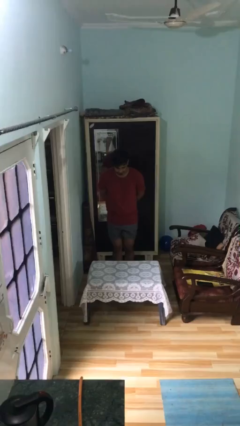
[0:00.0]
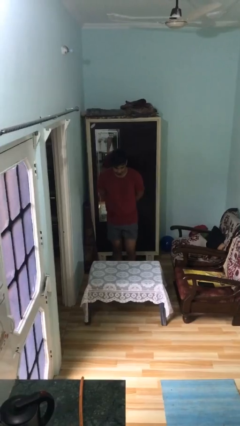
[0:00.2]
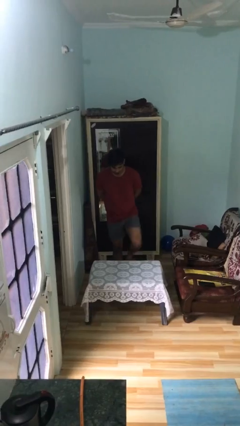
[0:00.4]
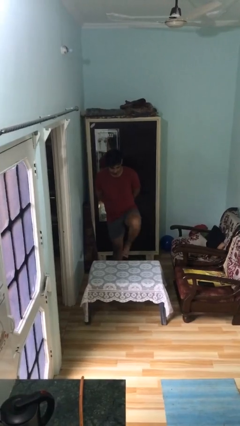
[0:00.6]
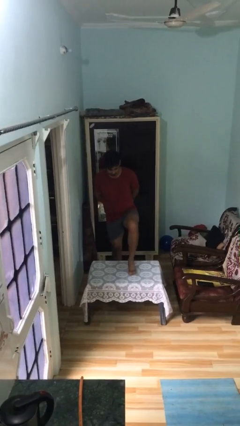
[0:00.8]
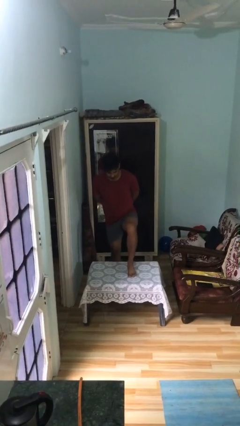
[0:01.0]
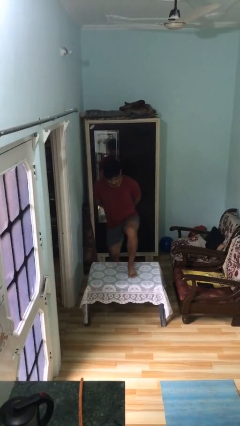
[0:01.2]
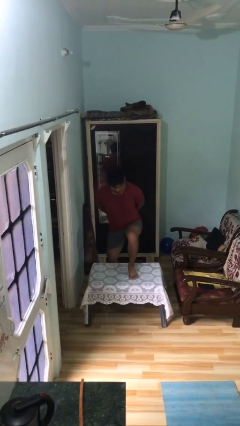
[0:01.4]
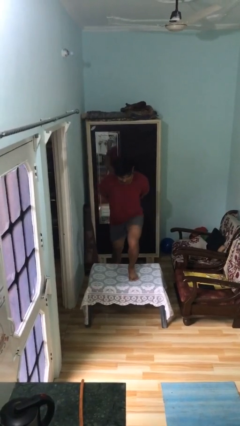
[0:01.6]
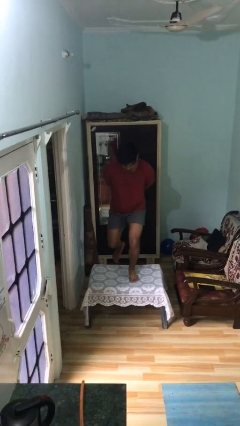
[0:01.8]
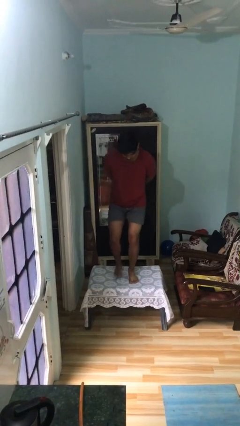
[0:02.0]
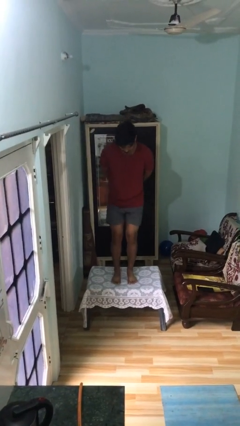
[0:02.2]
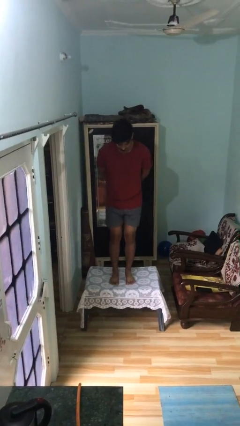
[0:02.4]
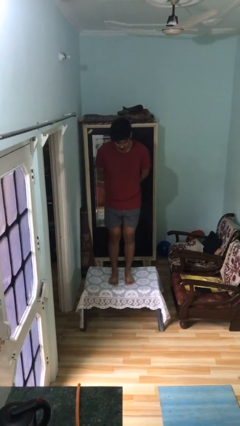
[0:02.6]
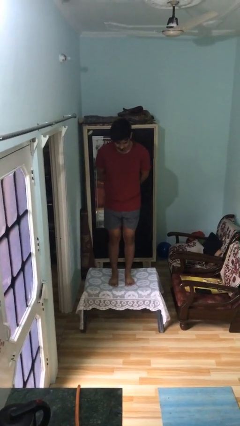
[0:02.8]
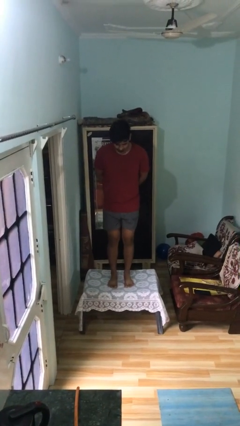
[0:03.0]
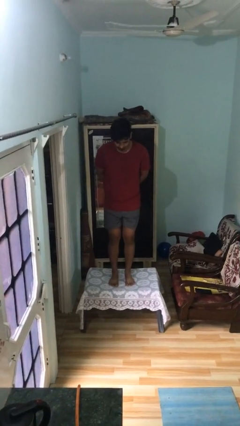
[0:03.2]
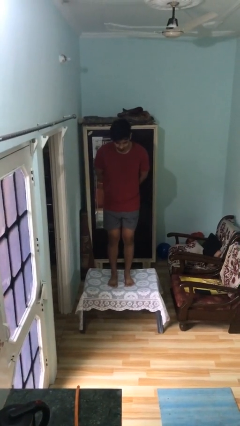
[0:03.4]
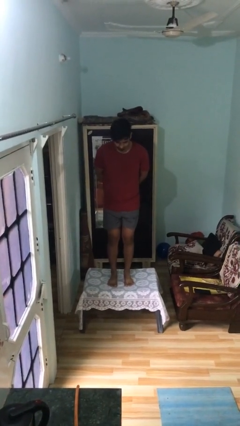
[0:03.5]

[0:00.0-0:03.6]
person climbs on table

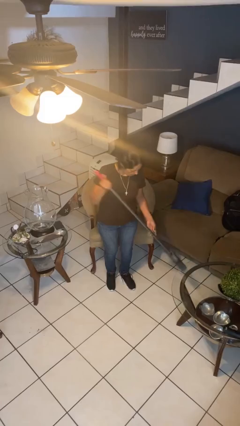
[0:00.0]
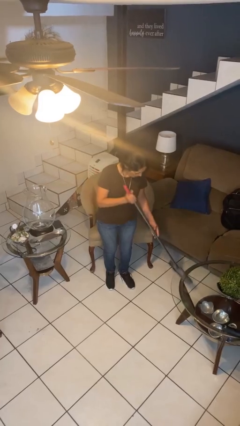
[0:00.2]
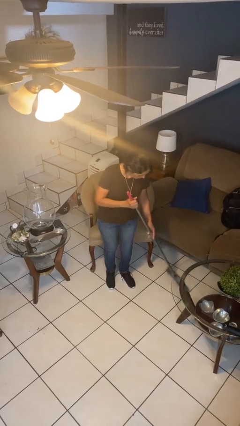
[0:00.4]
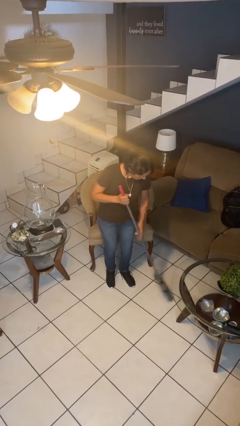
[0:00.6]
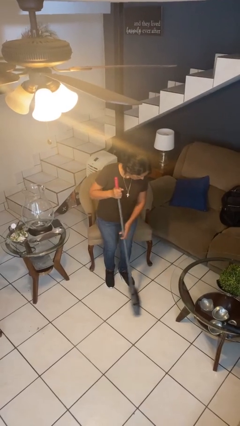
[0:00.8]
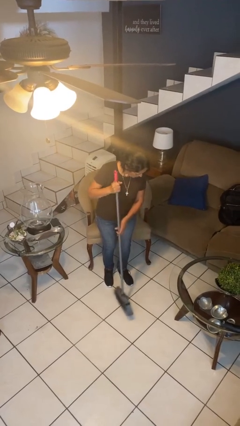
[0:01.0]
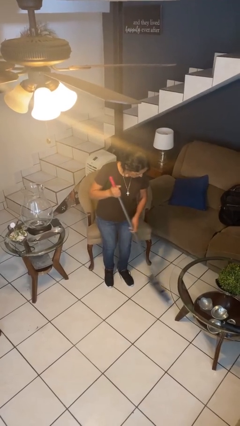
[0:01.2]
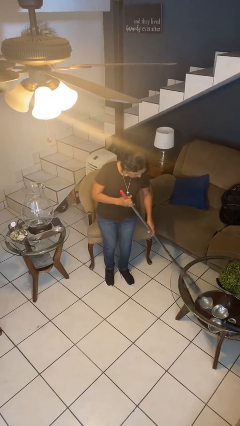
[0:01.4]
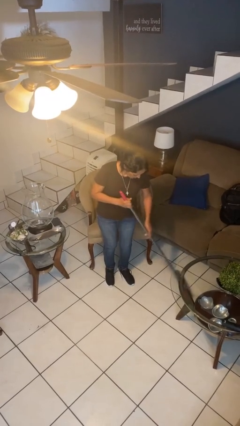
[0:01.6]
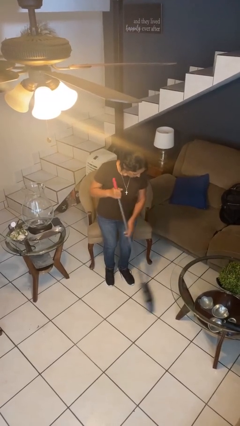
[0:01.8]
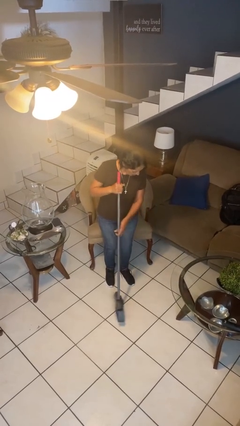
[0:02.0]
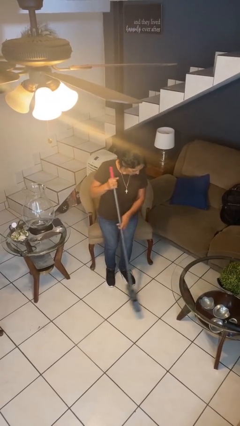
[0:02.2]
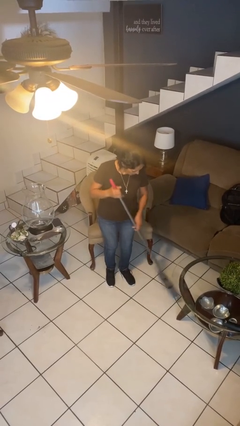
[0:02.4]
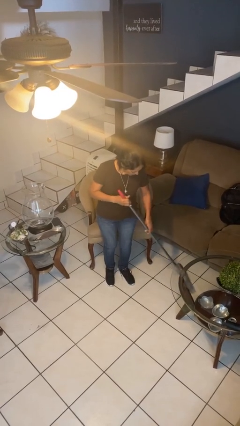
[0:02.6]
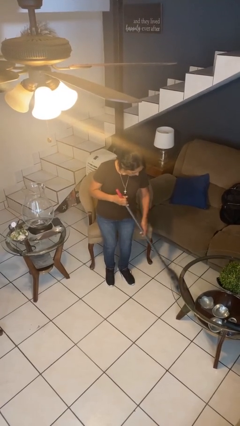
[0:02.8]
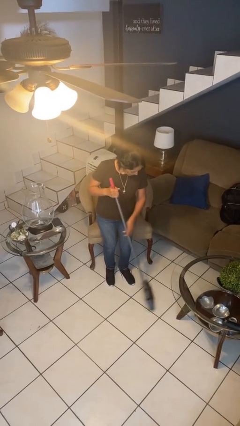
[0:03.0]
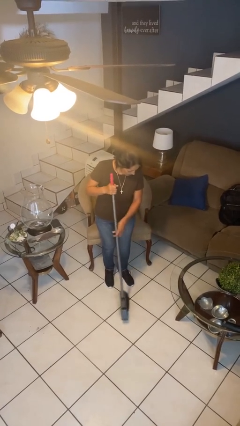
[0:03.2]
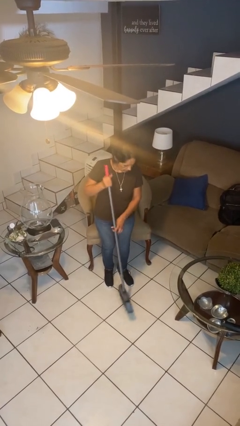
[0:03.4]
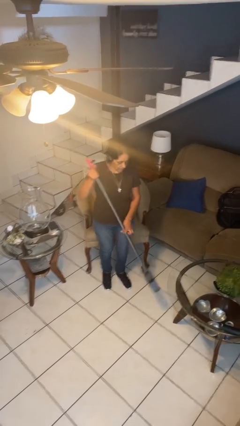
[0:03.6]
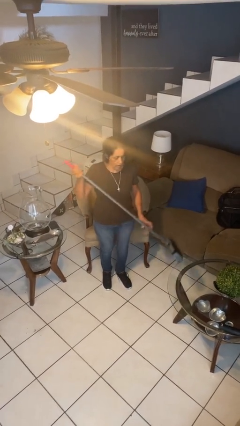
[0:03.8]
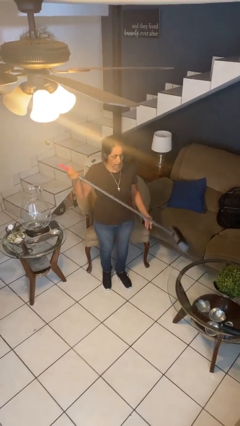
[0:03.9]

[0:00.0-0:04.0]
person sweeps floor

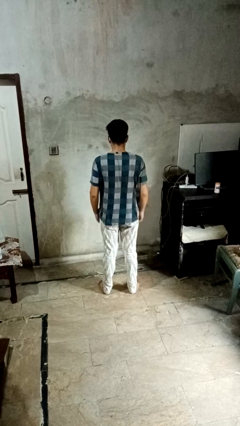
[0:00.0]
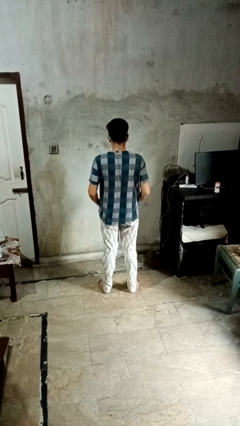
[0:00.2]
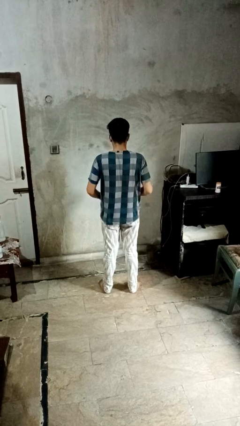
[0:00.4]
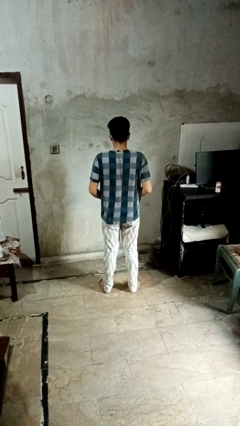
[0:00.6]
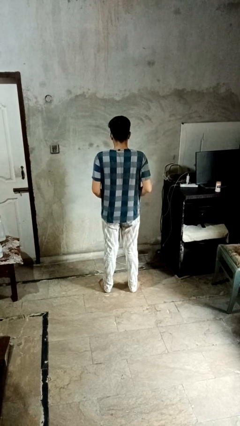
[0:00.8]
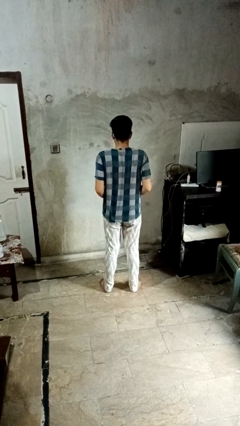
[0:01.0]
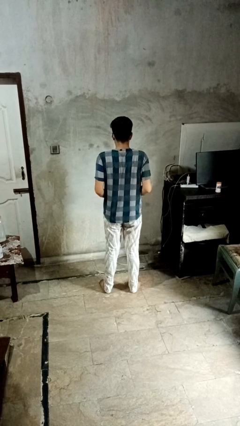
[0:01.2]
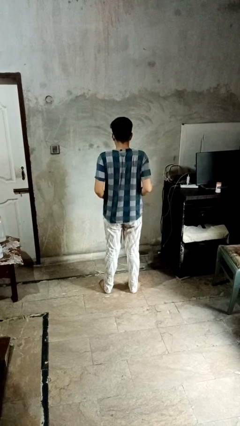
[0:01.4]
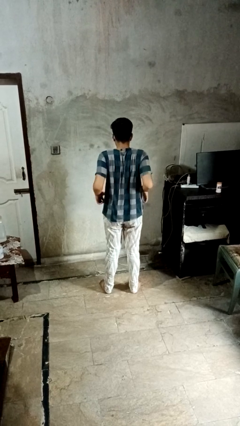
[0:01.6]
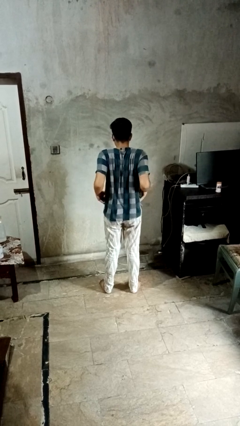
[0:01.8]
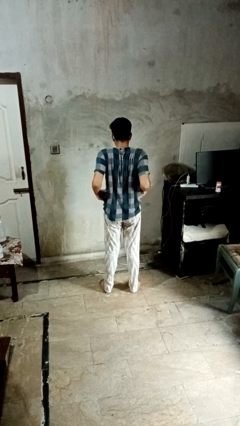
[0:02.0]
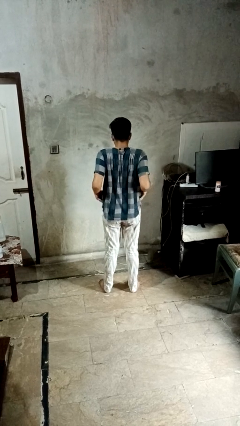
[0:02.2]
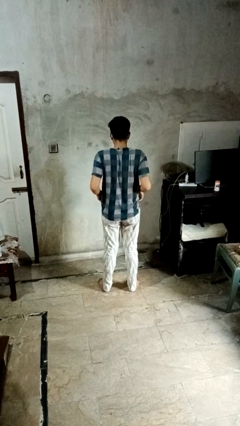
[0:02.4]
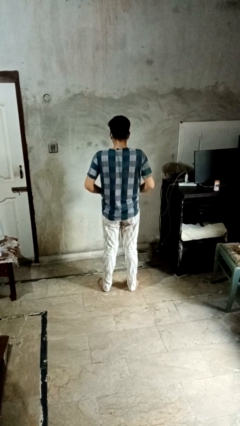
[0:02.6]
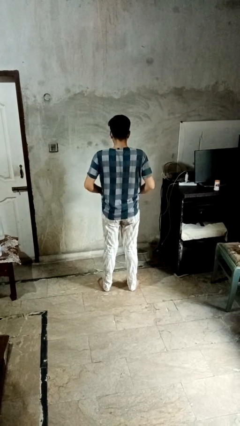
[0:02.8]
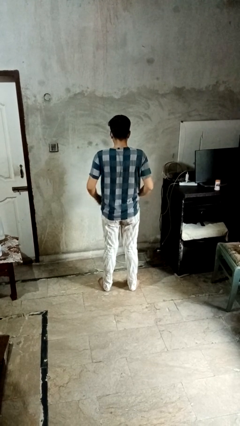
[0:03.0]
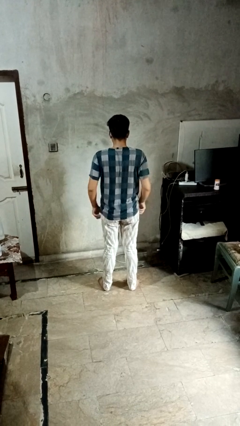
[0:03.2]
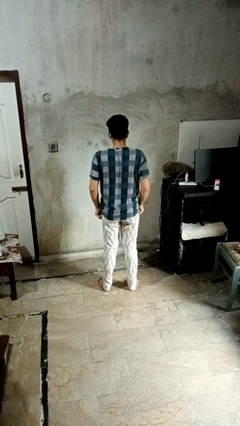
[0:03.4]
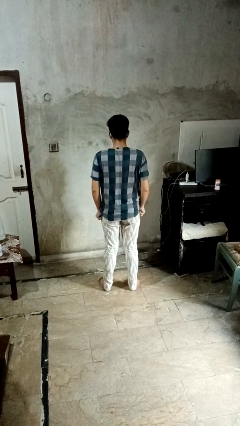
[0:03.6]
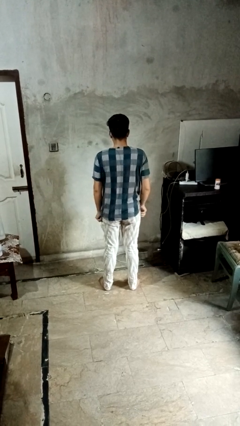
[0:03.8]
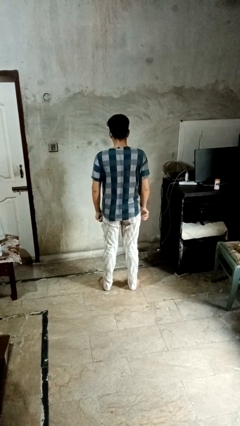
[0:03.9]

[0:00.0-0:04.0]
person hikes up pants

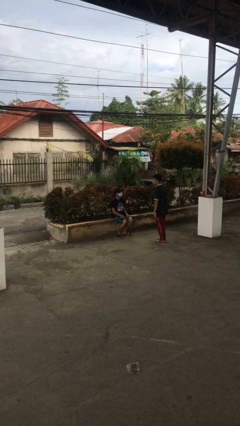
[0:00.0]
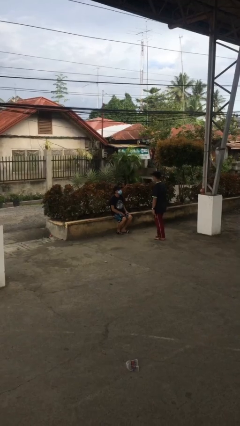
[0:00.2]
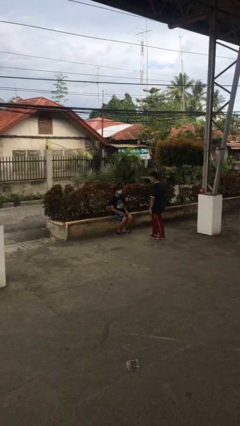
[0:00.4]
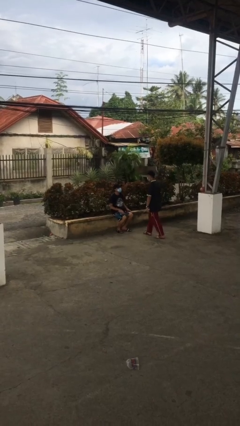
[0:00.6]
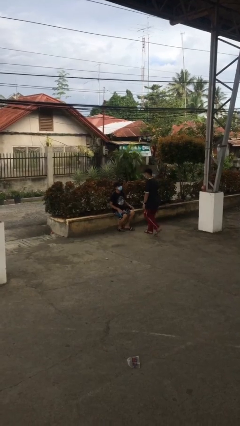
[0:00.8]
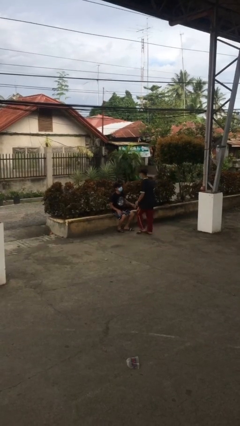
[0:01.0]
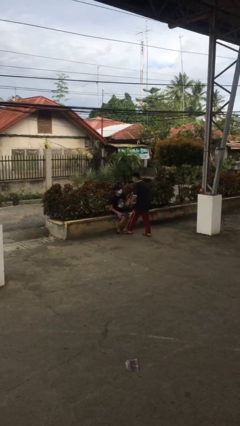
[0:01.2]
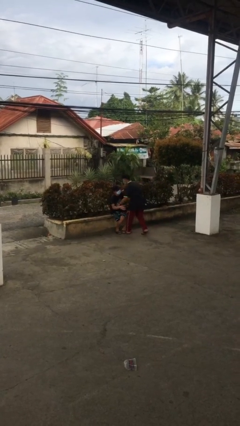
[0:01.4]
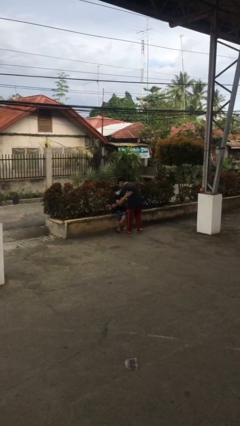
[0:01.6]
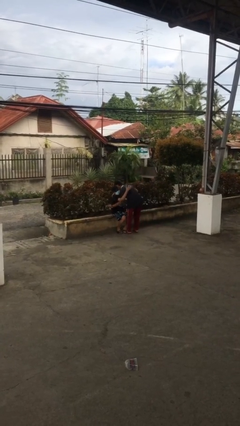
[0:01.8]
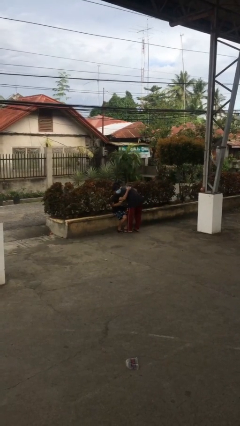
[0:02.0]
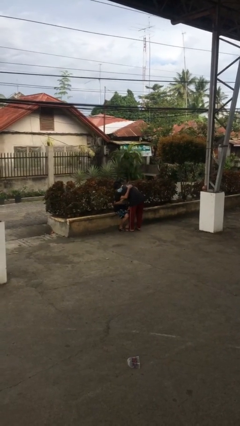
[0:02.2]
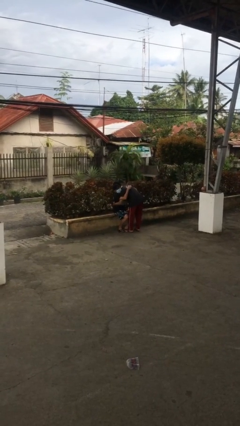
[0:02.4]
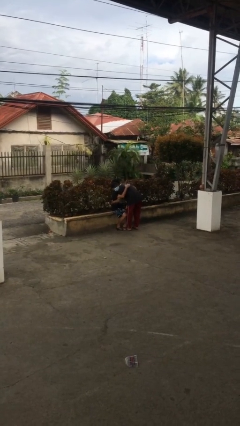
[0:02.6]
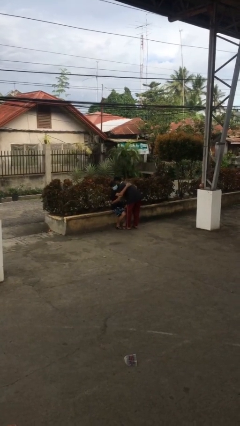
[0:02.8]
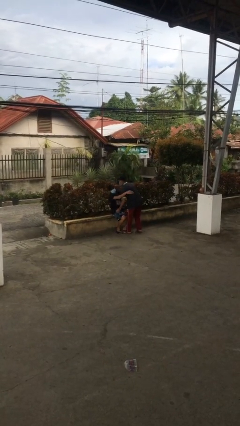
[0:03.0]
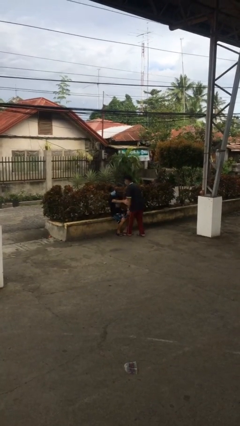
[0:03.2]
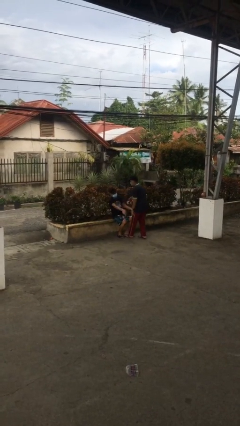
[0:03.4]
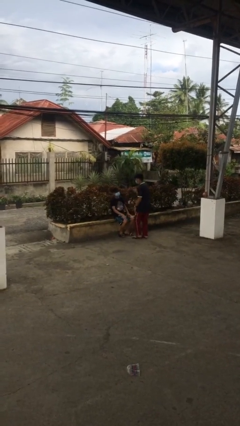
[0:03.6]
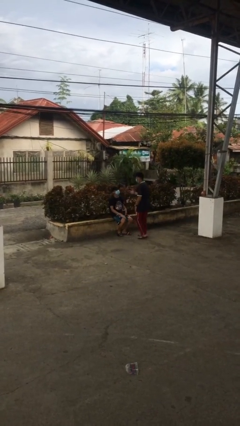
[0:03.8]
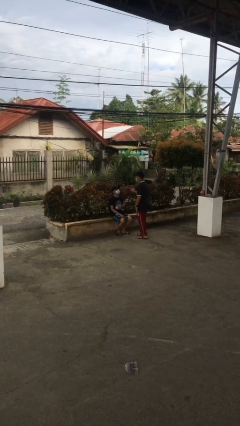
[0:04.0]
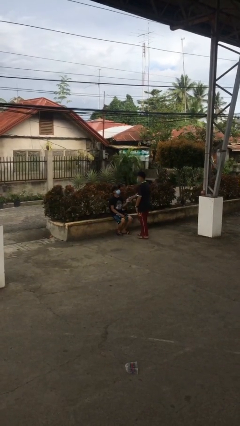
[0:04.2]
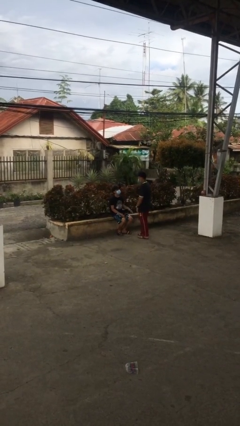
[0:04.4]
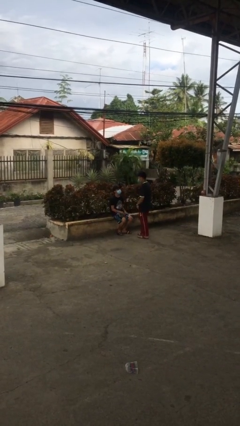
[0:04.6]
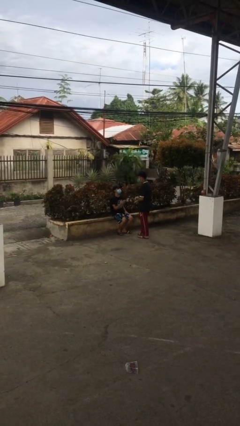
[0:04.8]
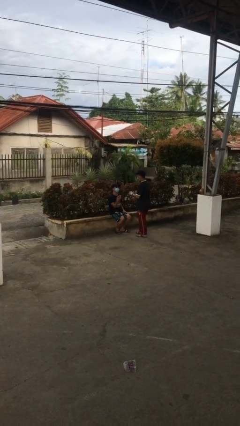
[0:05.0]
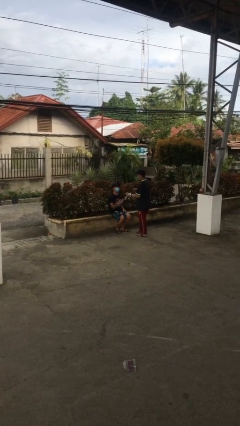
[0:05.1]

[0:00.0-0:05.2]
person embraces person

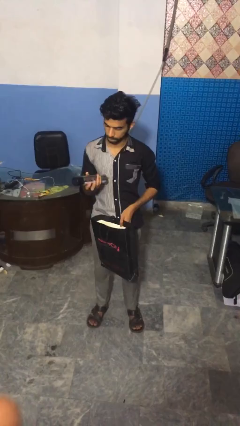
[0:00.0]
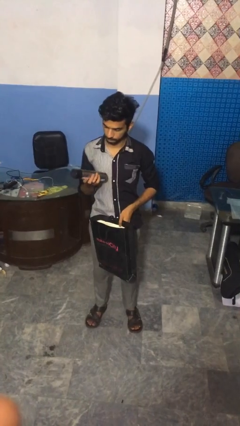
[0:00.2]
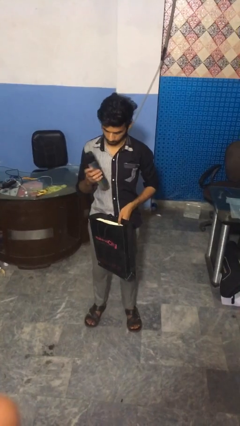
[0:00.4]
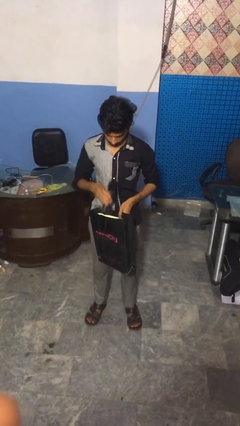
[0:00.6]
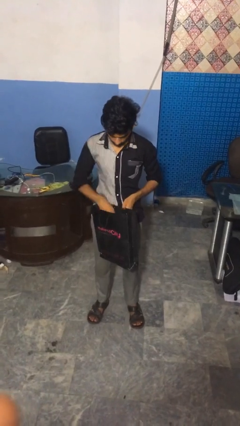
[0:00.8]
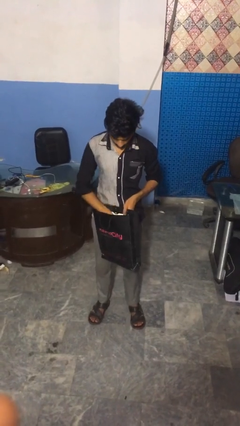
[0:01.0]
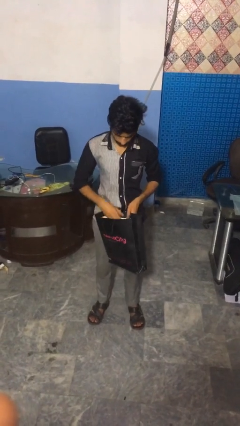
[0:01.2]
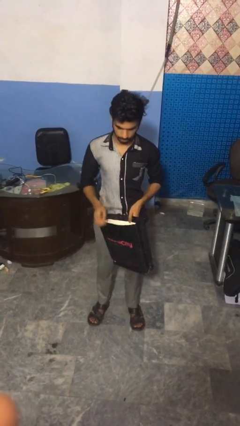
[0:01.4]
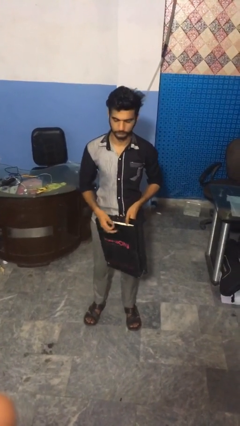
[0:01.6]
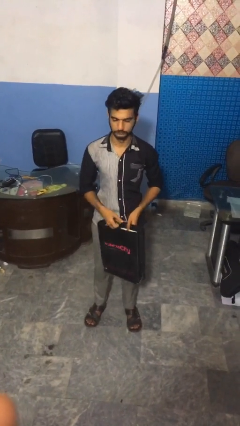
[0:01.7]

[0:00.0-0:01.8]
person puts object into bag
